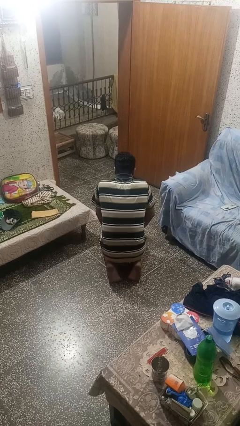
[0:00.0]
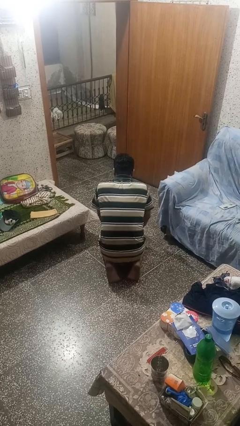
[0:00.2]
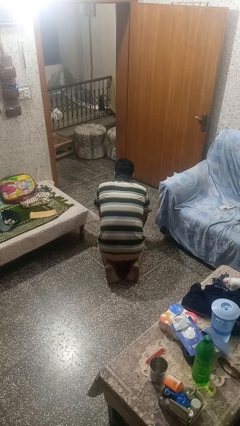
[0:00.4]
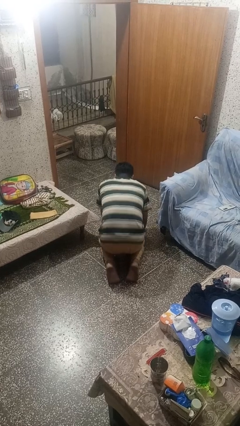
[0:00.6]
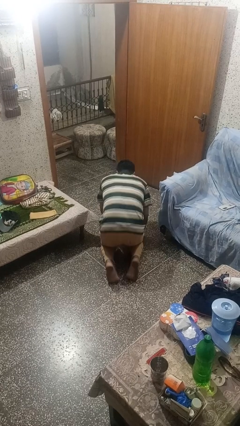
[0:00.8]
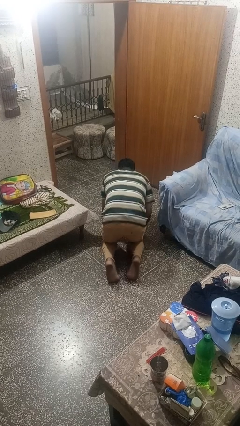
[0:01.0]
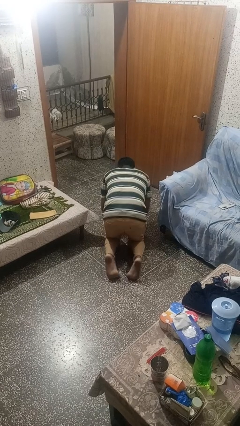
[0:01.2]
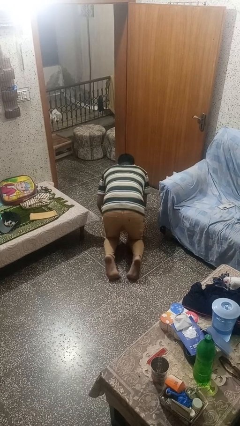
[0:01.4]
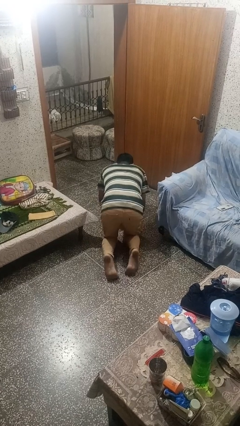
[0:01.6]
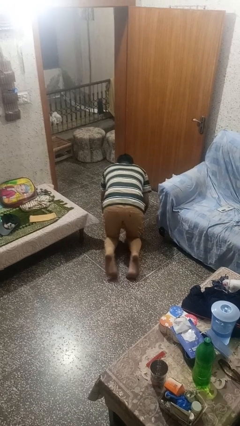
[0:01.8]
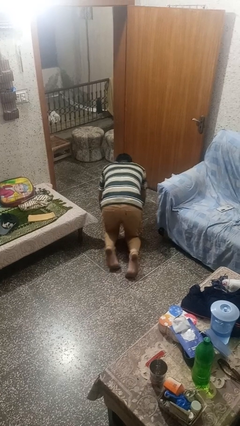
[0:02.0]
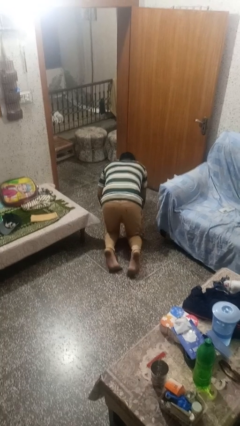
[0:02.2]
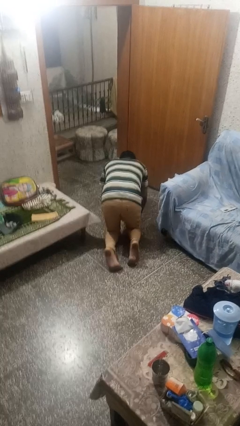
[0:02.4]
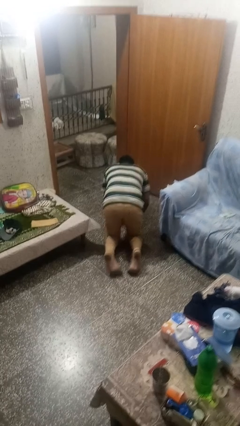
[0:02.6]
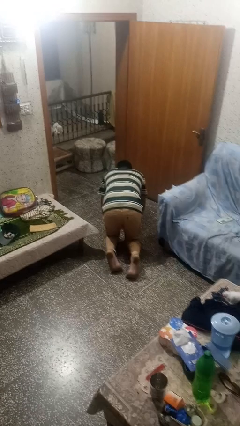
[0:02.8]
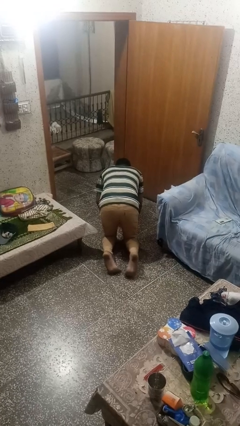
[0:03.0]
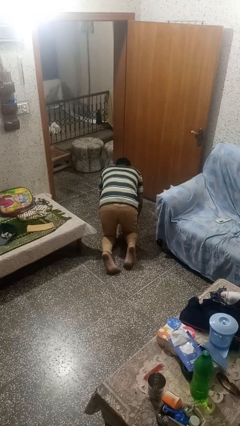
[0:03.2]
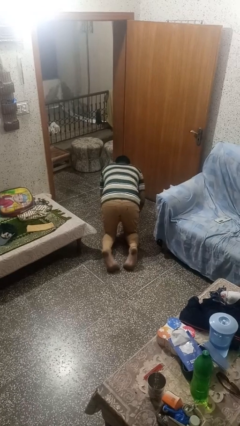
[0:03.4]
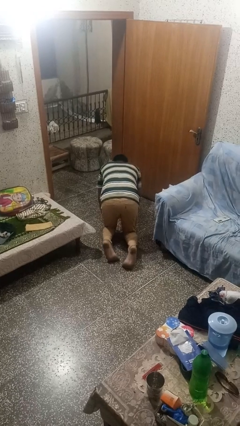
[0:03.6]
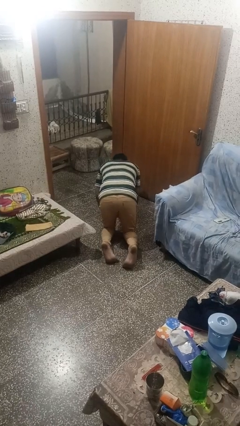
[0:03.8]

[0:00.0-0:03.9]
person crawls

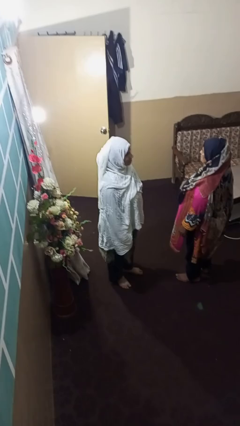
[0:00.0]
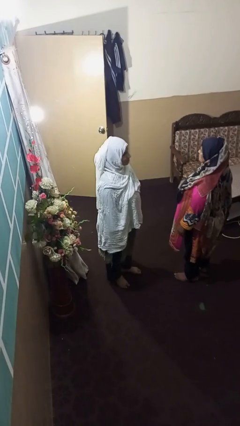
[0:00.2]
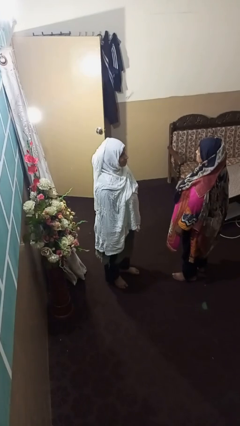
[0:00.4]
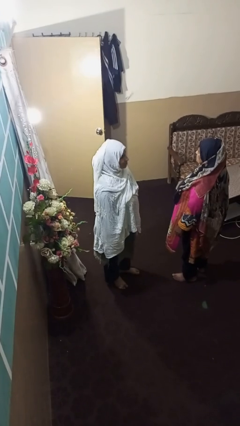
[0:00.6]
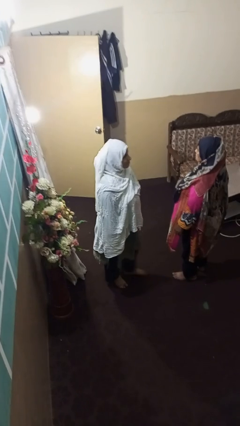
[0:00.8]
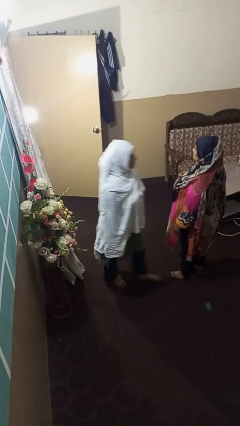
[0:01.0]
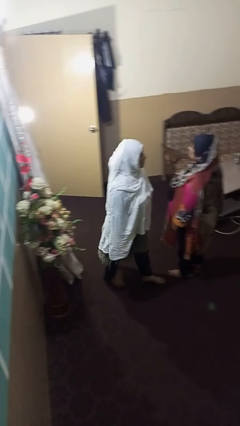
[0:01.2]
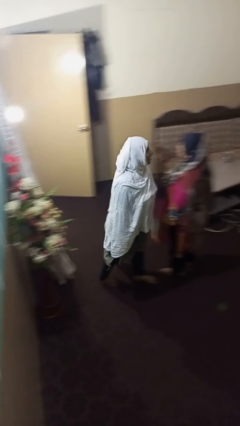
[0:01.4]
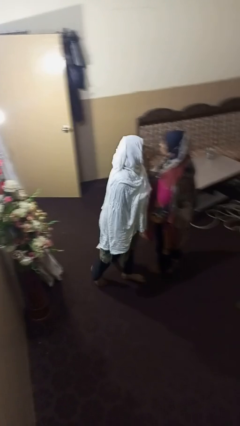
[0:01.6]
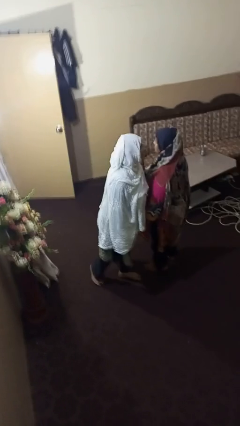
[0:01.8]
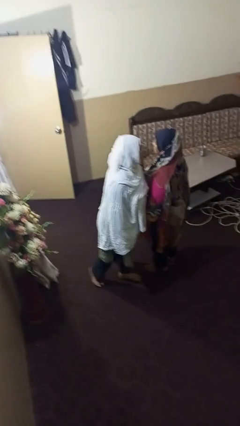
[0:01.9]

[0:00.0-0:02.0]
person laughs with person

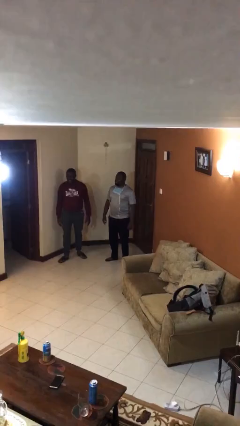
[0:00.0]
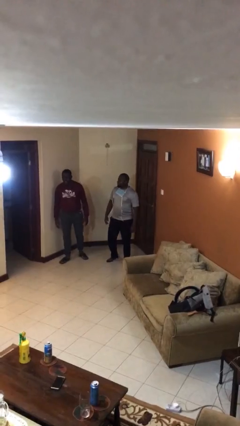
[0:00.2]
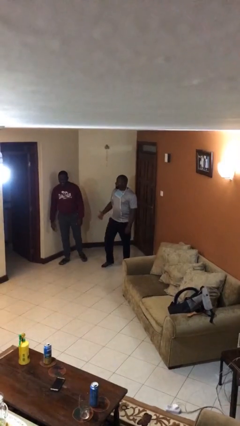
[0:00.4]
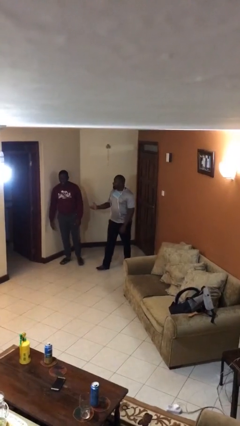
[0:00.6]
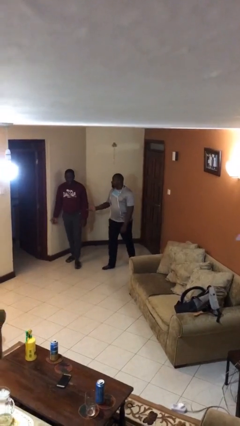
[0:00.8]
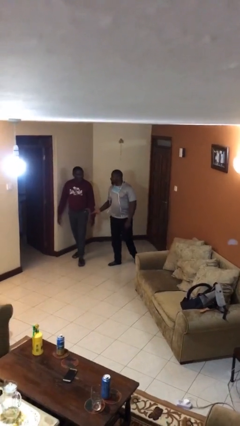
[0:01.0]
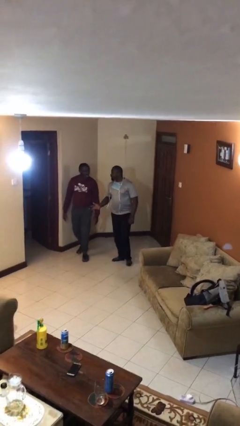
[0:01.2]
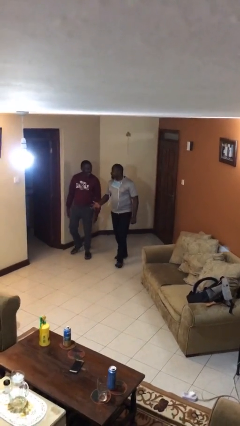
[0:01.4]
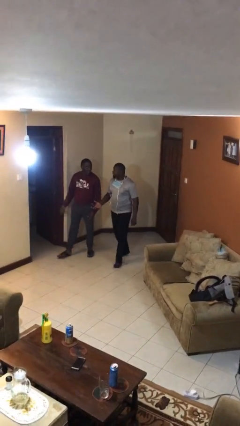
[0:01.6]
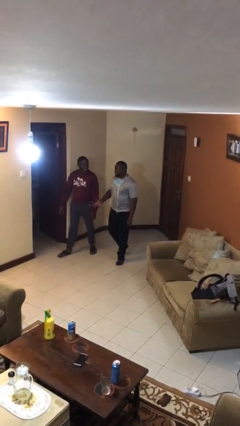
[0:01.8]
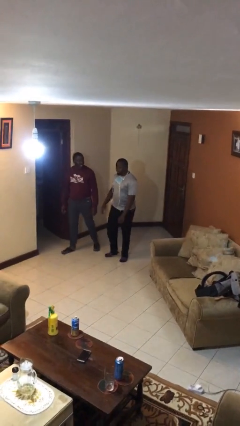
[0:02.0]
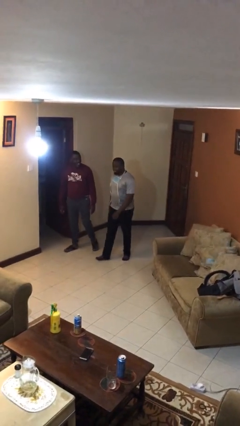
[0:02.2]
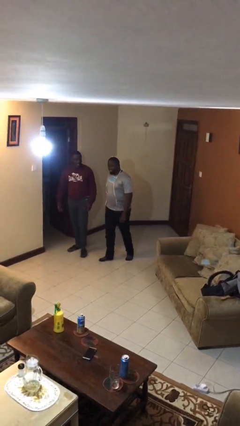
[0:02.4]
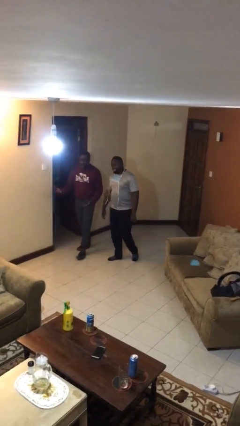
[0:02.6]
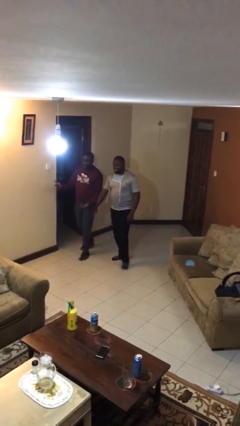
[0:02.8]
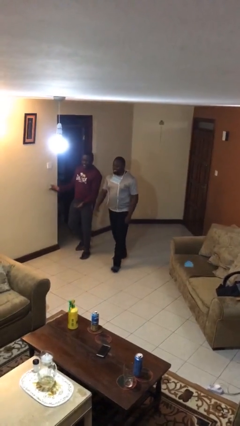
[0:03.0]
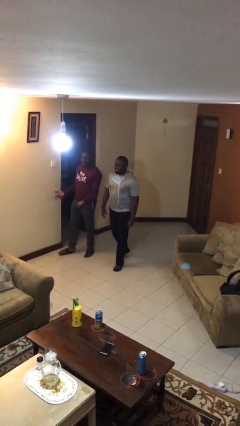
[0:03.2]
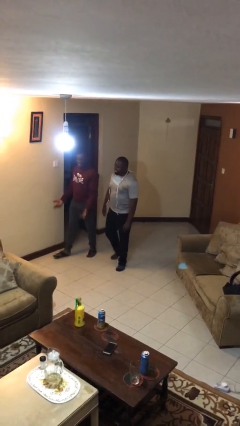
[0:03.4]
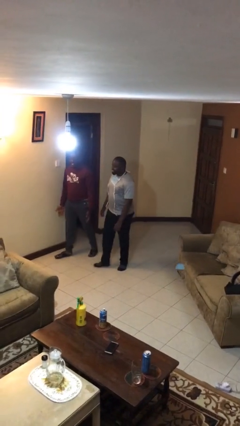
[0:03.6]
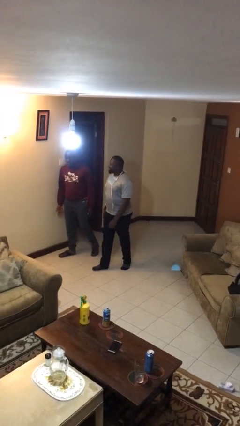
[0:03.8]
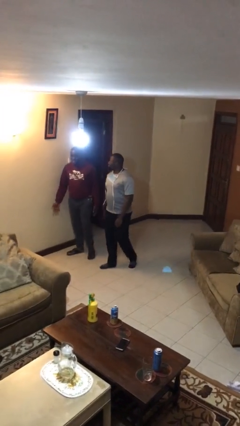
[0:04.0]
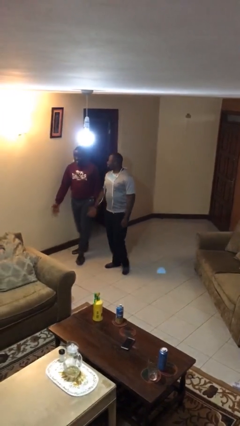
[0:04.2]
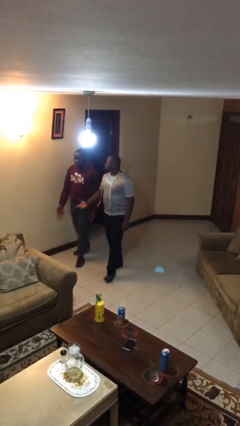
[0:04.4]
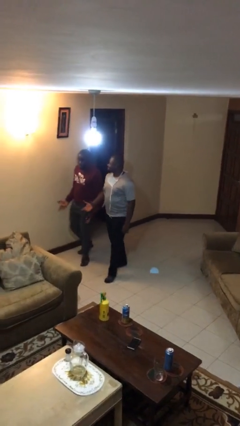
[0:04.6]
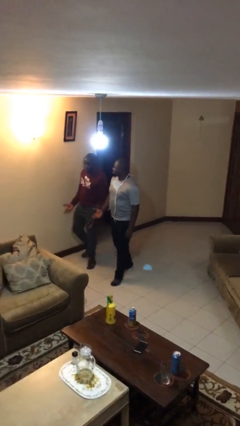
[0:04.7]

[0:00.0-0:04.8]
person talks to person

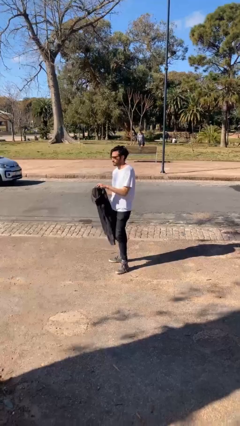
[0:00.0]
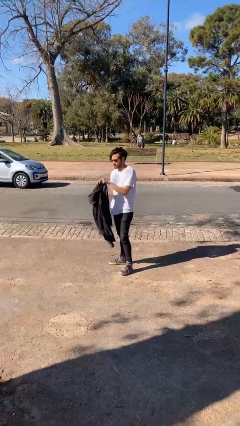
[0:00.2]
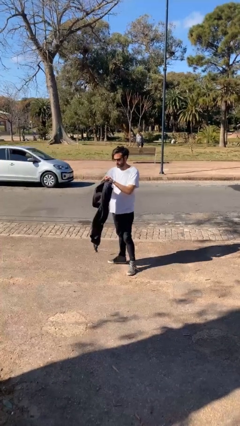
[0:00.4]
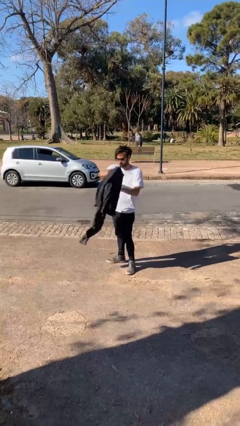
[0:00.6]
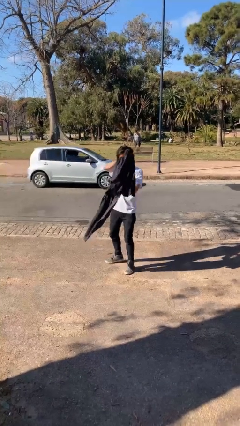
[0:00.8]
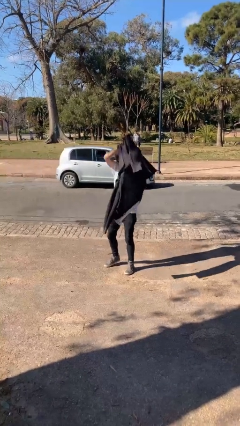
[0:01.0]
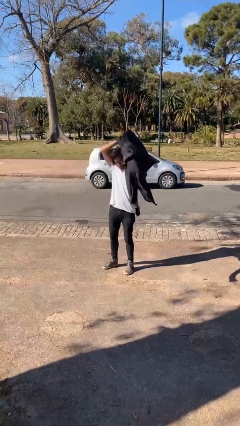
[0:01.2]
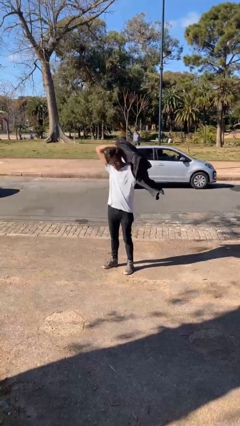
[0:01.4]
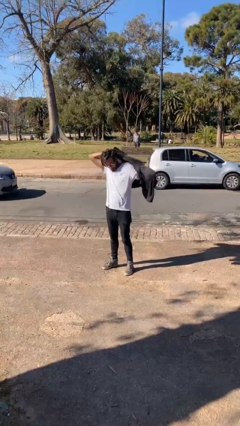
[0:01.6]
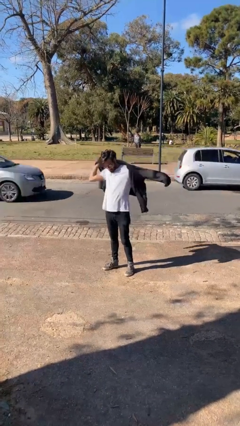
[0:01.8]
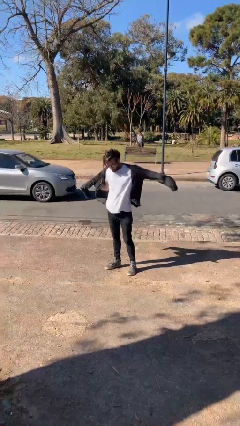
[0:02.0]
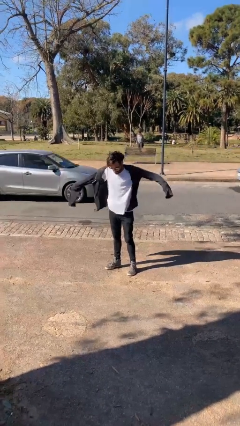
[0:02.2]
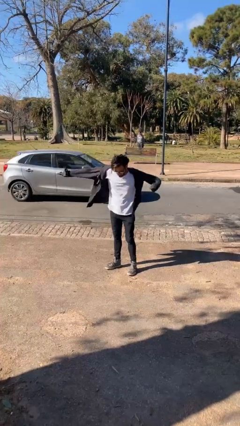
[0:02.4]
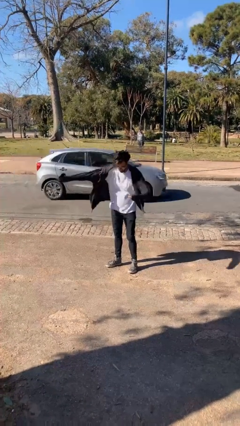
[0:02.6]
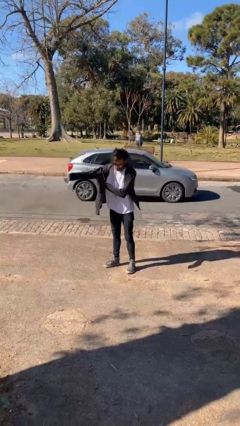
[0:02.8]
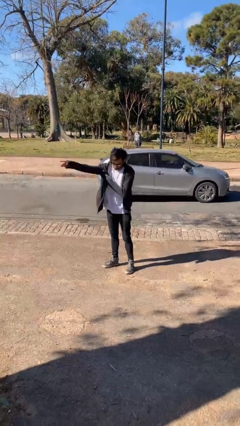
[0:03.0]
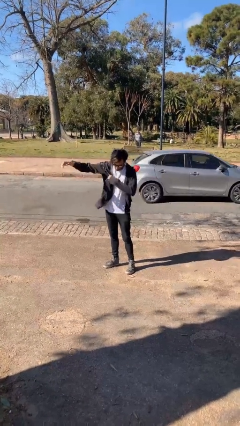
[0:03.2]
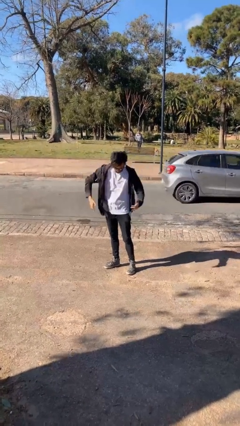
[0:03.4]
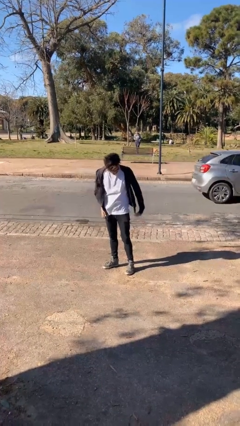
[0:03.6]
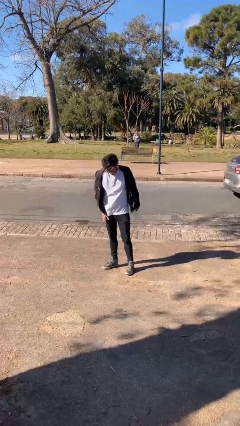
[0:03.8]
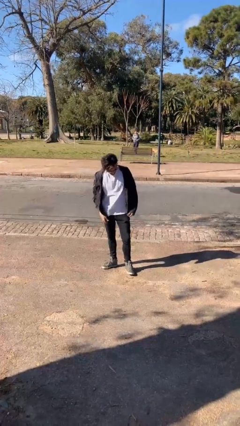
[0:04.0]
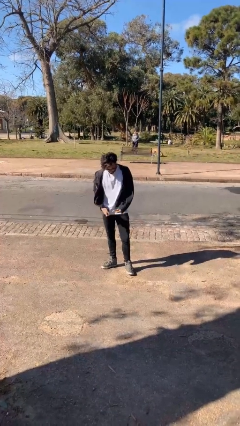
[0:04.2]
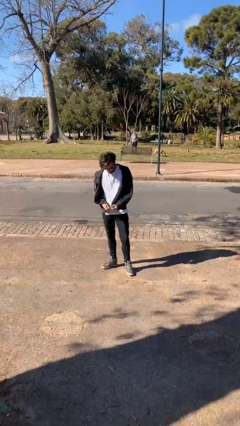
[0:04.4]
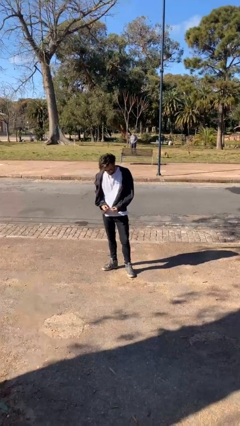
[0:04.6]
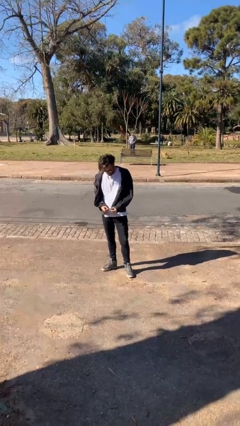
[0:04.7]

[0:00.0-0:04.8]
person puts on jacket

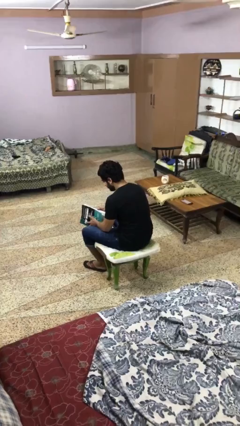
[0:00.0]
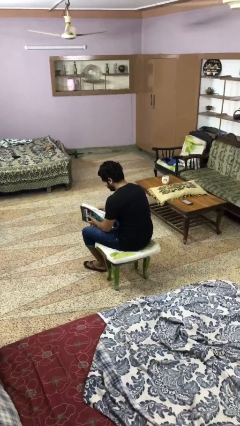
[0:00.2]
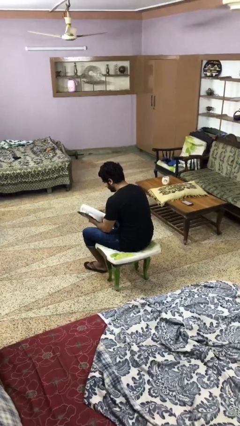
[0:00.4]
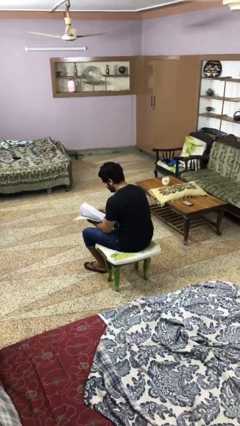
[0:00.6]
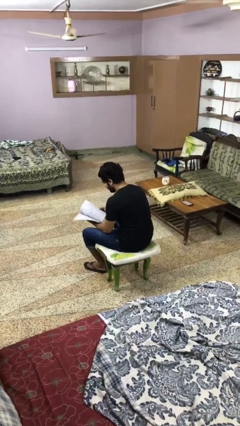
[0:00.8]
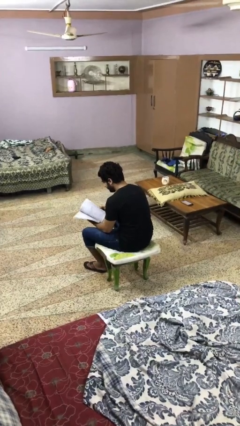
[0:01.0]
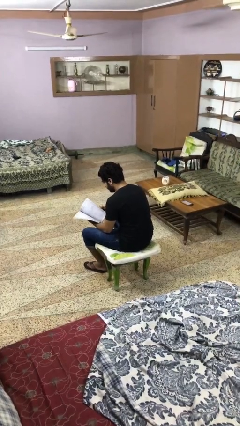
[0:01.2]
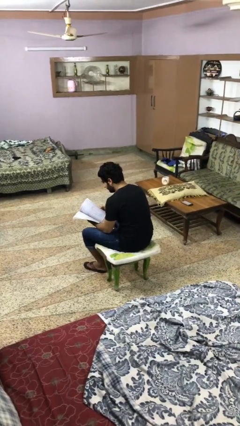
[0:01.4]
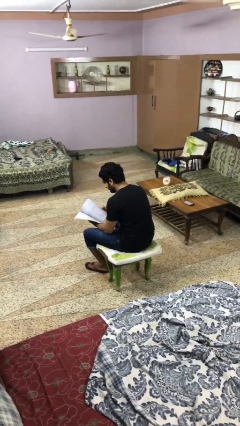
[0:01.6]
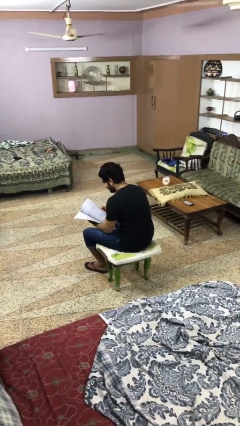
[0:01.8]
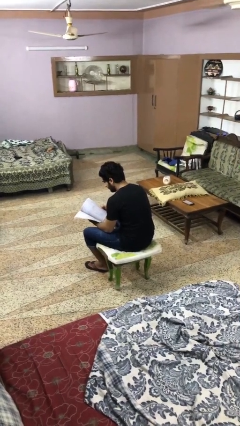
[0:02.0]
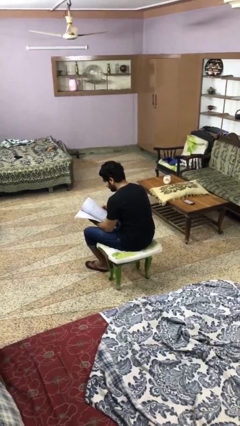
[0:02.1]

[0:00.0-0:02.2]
person reads book
